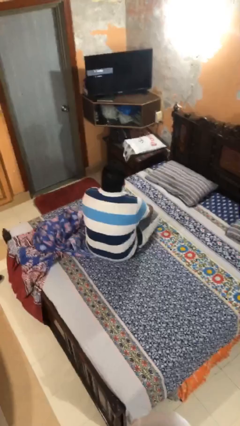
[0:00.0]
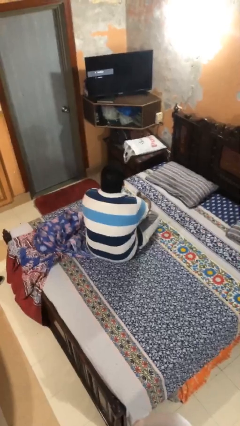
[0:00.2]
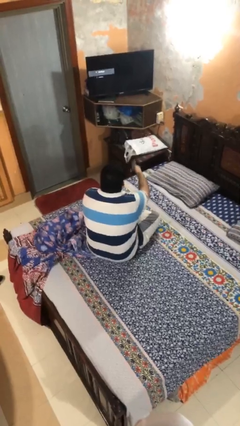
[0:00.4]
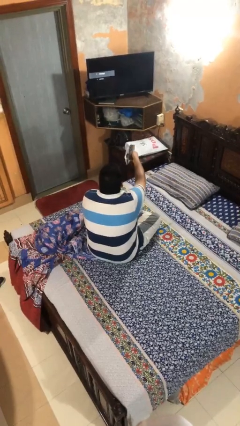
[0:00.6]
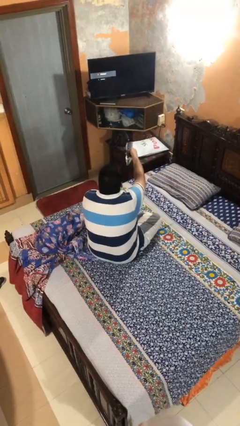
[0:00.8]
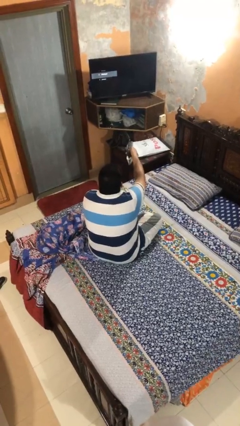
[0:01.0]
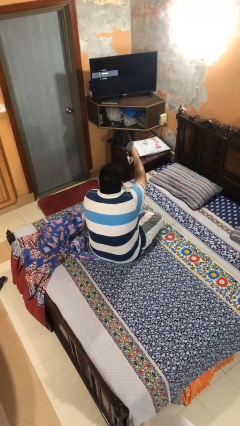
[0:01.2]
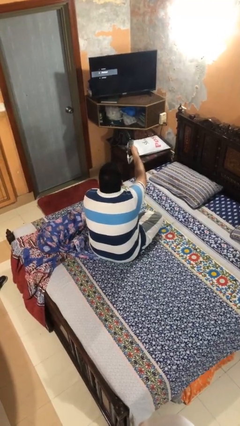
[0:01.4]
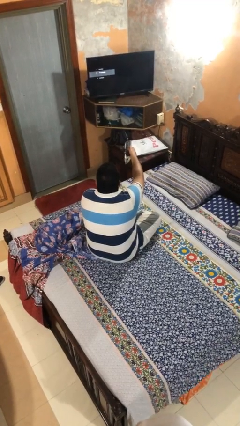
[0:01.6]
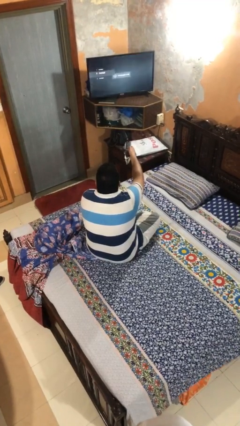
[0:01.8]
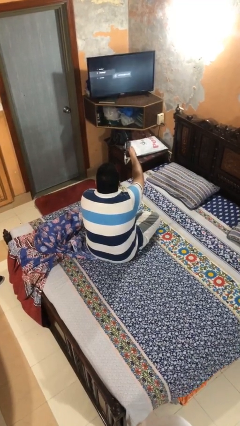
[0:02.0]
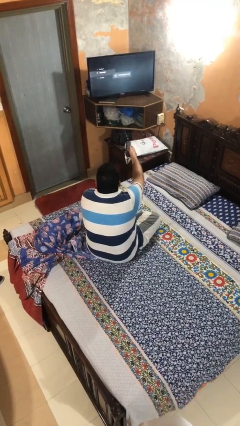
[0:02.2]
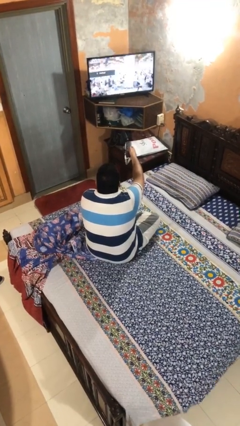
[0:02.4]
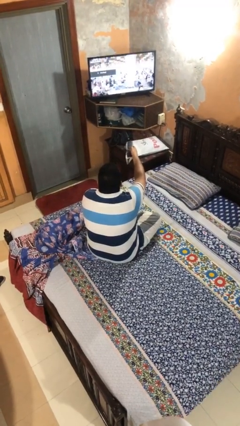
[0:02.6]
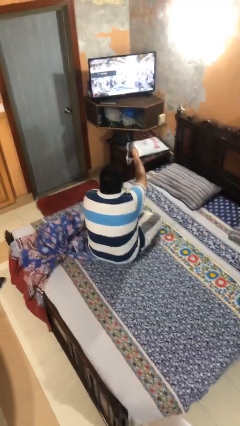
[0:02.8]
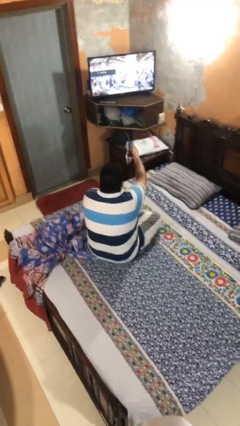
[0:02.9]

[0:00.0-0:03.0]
person uses television remote

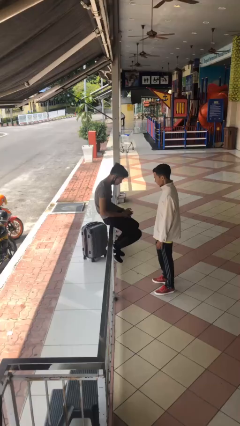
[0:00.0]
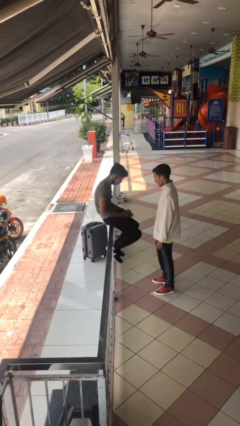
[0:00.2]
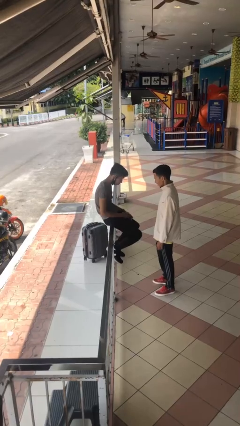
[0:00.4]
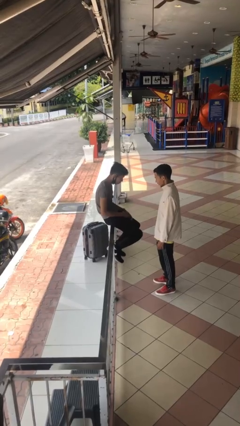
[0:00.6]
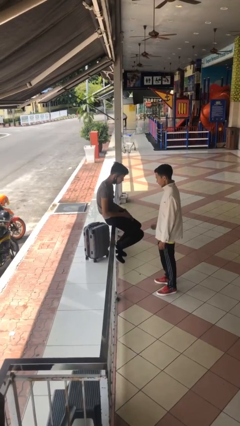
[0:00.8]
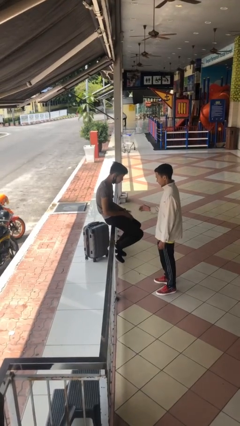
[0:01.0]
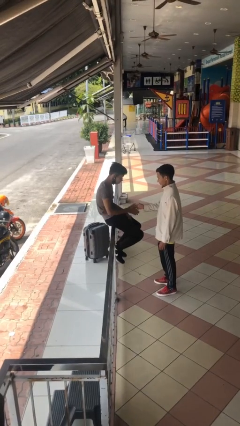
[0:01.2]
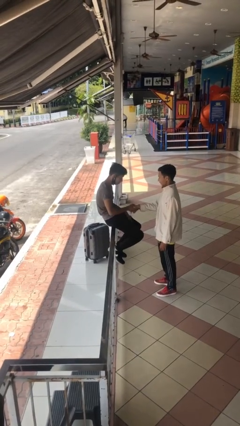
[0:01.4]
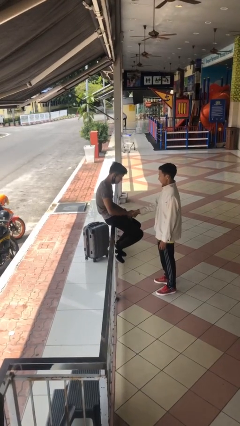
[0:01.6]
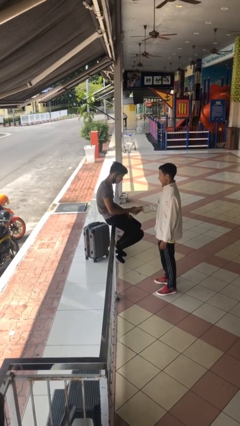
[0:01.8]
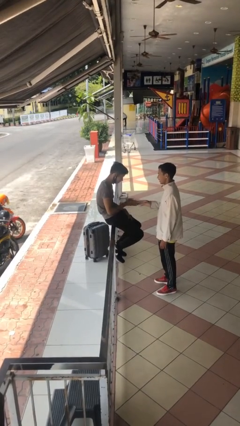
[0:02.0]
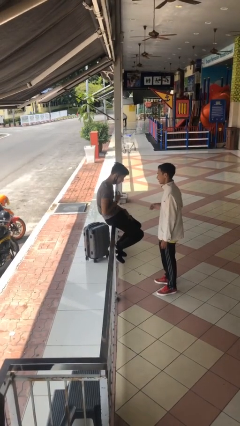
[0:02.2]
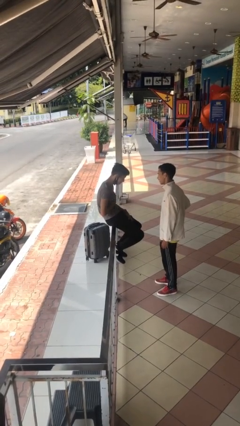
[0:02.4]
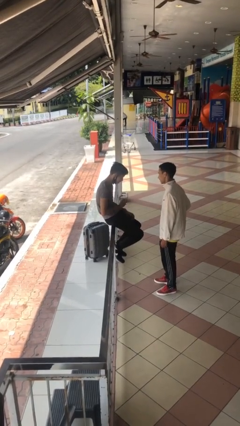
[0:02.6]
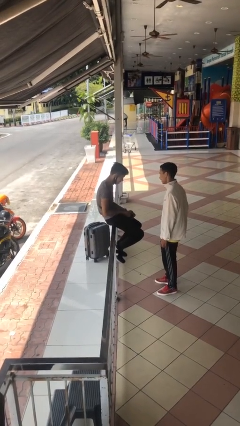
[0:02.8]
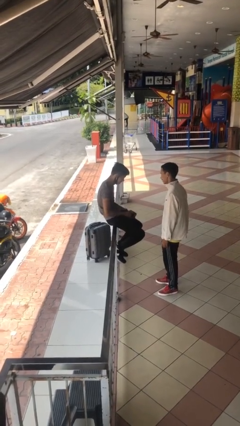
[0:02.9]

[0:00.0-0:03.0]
person shakes hand

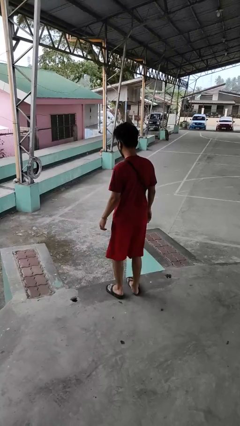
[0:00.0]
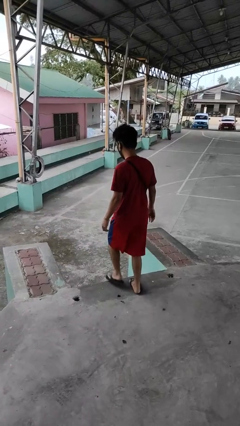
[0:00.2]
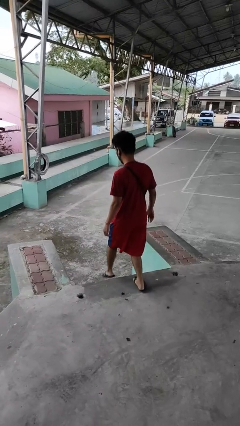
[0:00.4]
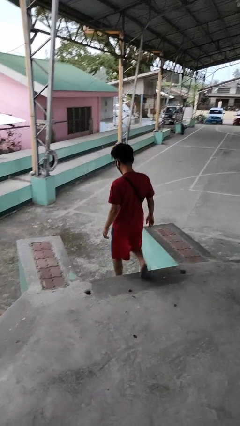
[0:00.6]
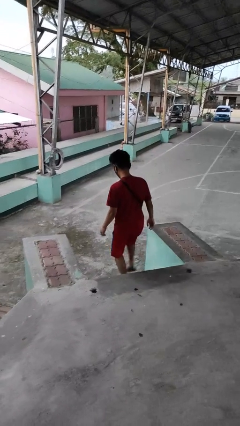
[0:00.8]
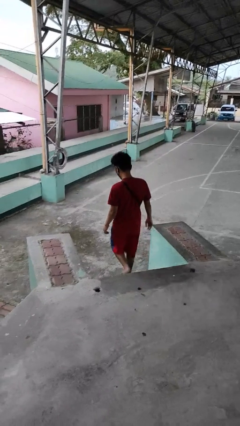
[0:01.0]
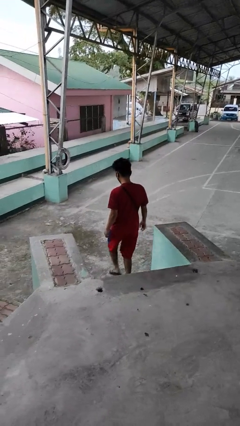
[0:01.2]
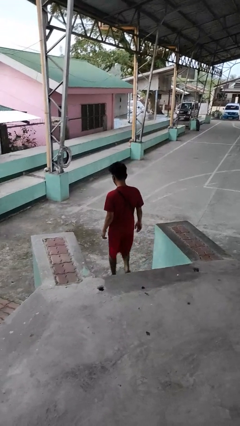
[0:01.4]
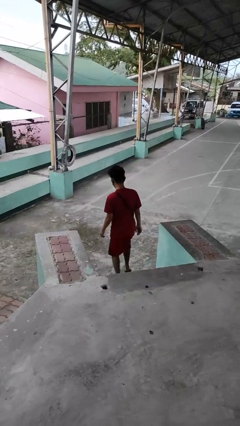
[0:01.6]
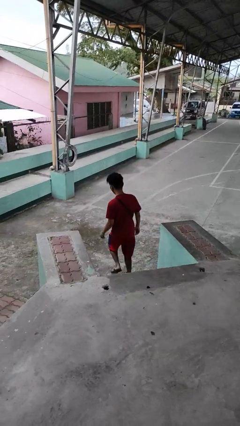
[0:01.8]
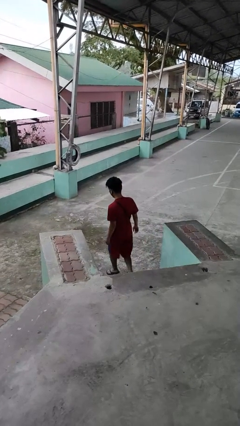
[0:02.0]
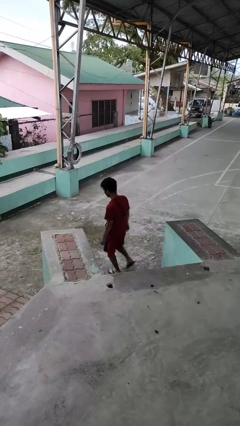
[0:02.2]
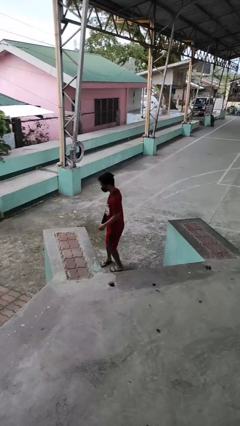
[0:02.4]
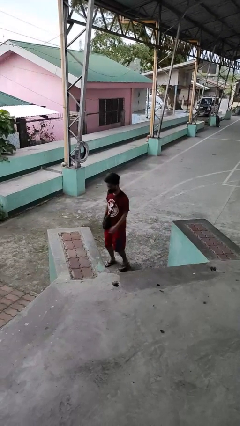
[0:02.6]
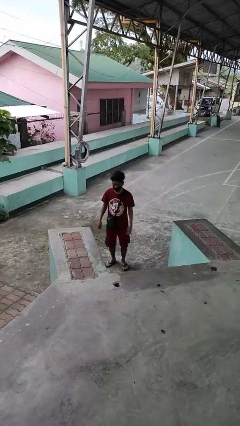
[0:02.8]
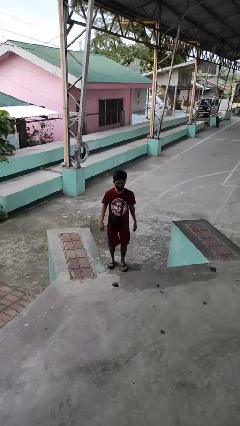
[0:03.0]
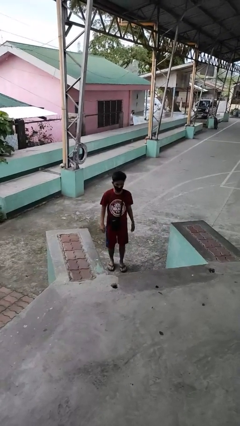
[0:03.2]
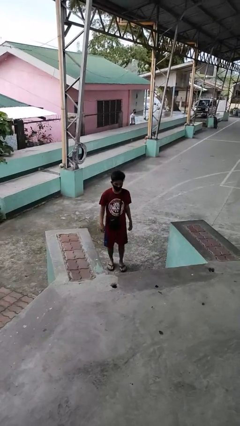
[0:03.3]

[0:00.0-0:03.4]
person climbs down stairs

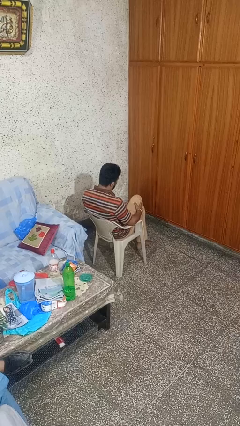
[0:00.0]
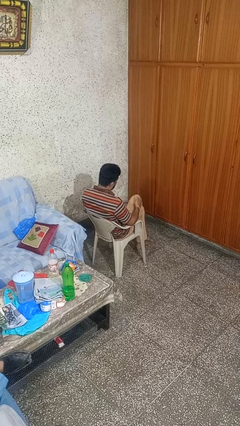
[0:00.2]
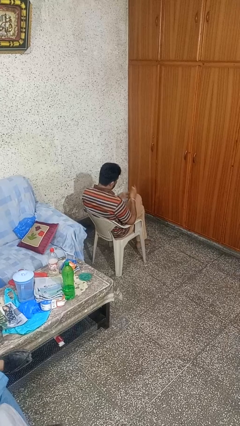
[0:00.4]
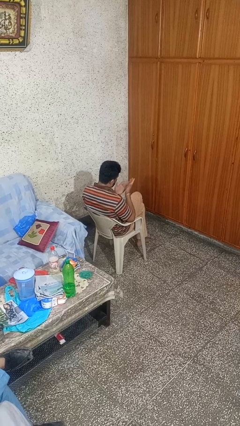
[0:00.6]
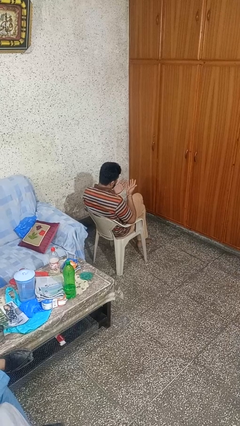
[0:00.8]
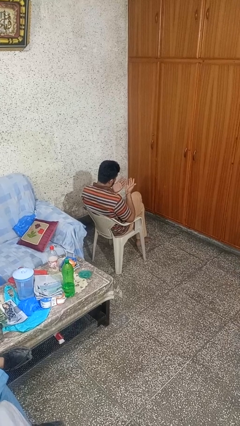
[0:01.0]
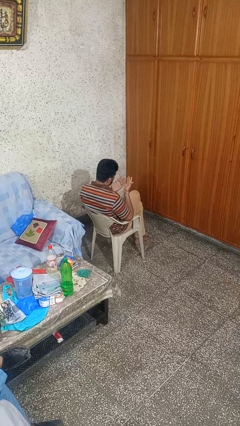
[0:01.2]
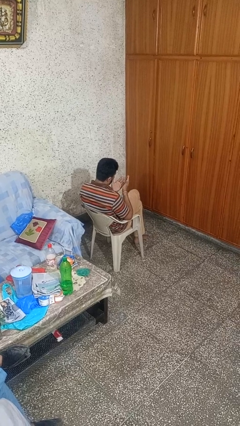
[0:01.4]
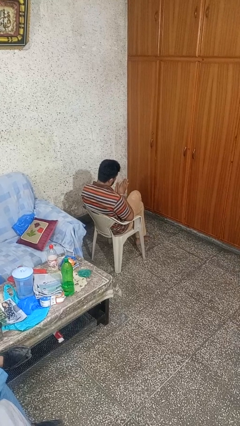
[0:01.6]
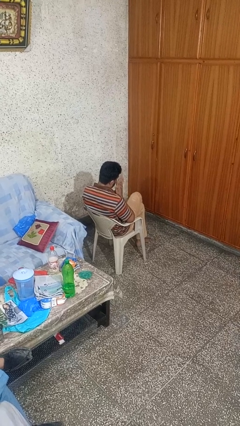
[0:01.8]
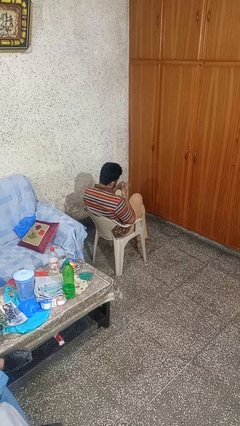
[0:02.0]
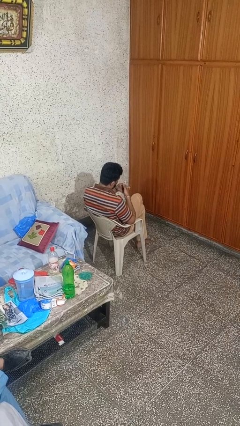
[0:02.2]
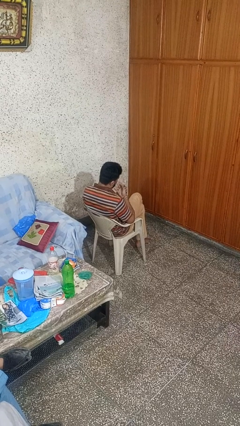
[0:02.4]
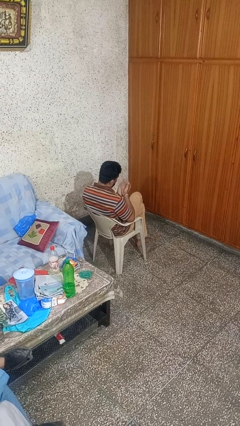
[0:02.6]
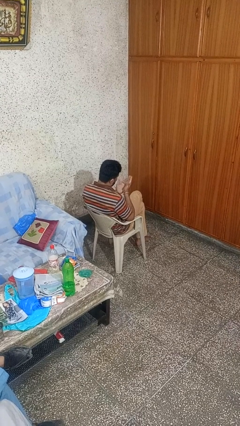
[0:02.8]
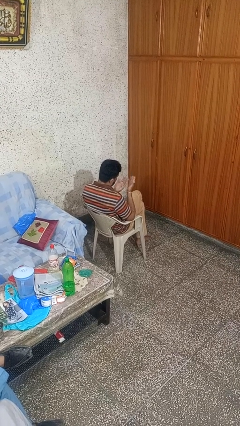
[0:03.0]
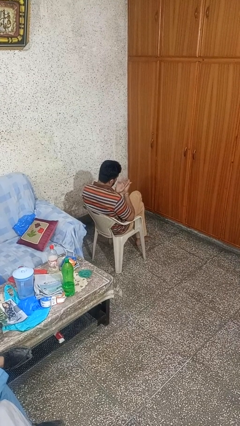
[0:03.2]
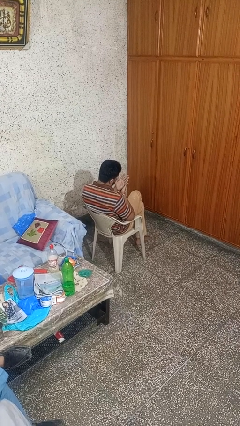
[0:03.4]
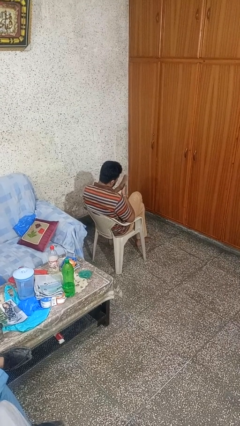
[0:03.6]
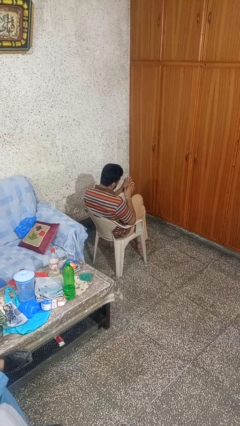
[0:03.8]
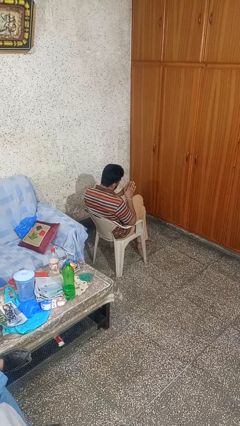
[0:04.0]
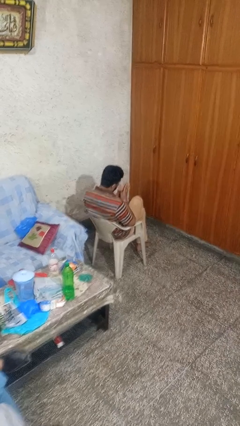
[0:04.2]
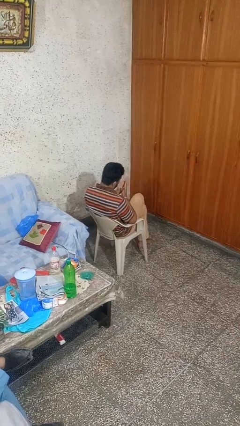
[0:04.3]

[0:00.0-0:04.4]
person looks at hands in lap

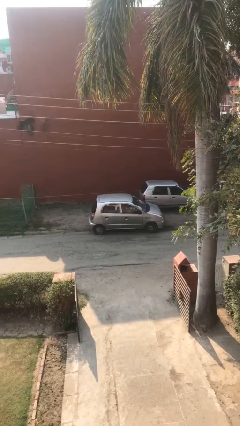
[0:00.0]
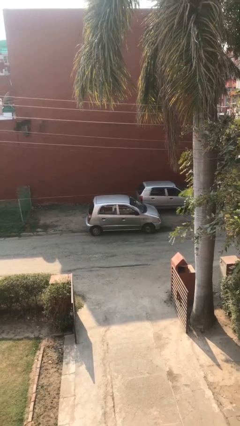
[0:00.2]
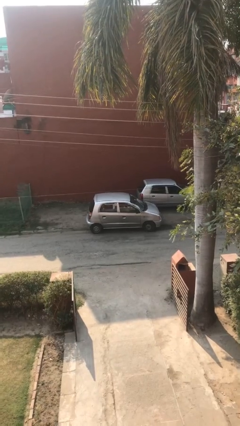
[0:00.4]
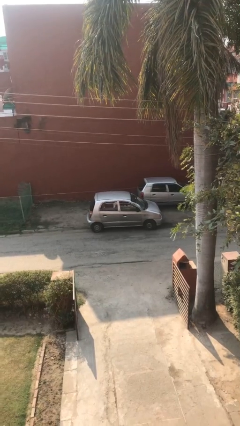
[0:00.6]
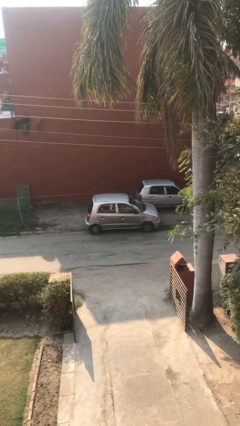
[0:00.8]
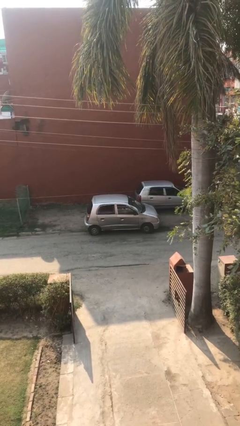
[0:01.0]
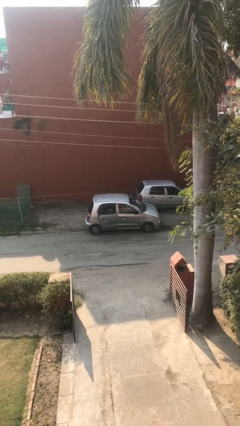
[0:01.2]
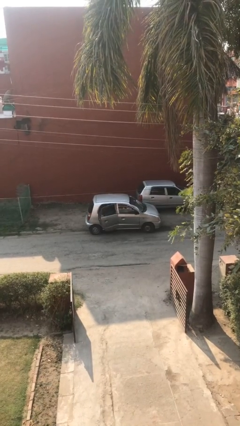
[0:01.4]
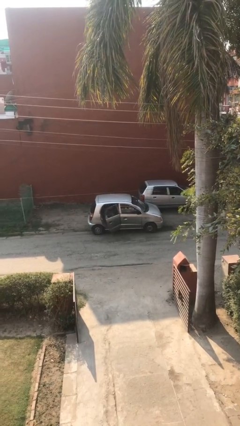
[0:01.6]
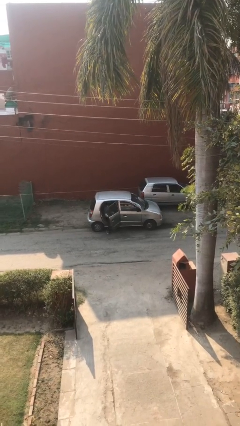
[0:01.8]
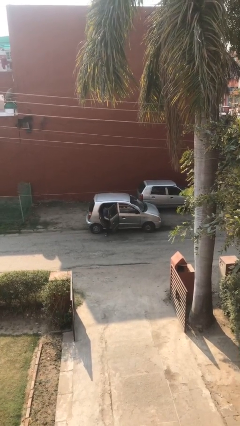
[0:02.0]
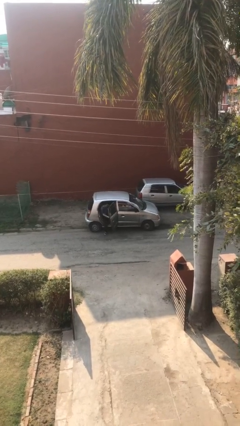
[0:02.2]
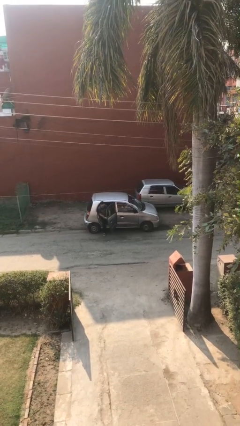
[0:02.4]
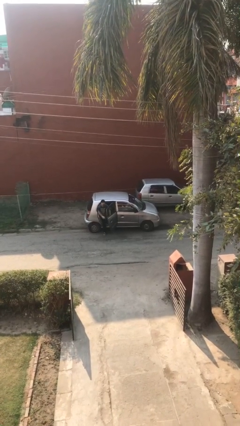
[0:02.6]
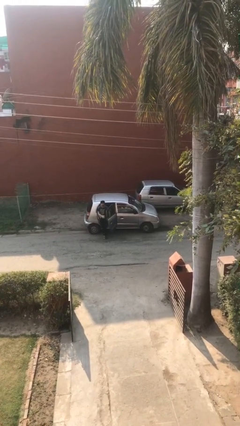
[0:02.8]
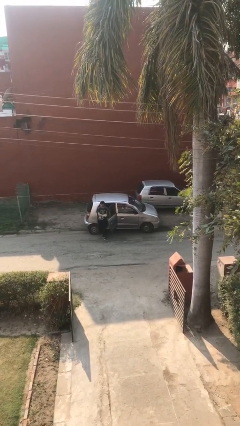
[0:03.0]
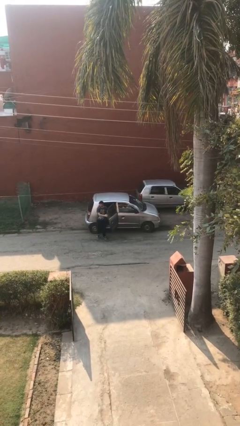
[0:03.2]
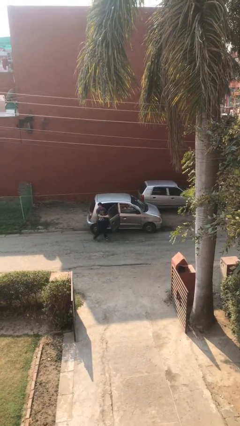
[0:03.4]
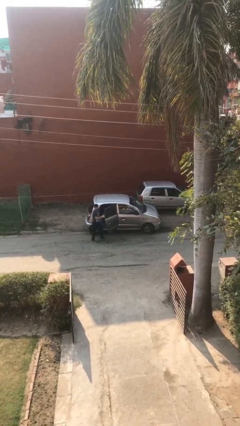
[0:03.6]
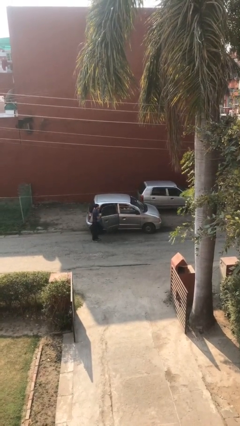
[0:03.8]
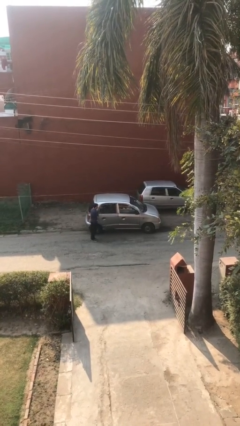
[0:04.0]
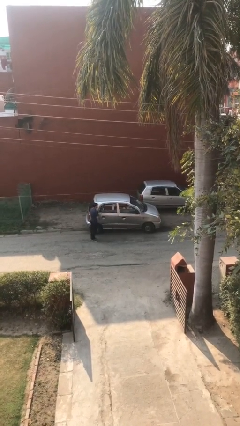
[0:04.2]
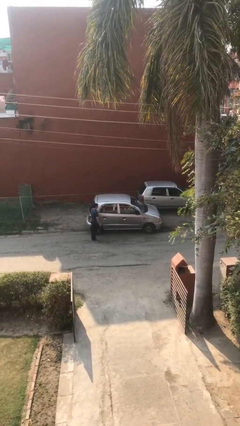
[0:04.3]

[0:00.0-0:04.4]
car drops off person
